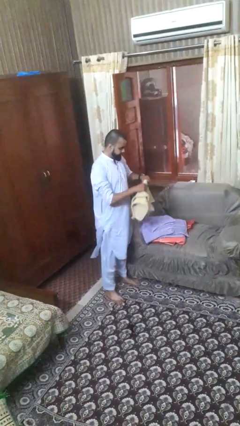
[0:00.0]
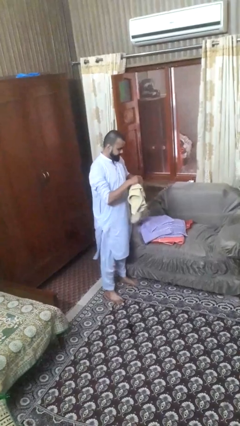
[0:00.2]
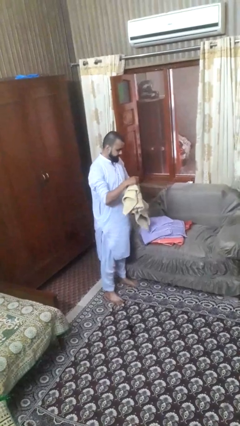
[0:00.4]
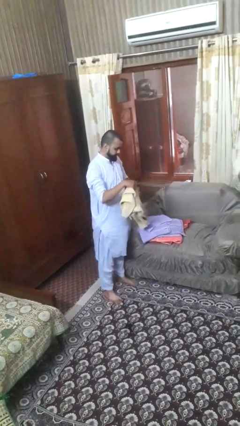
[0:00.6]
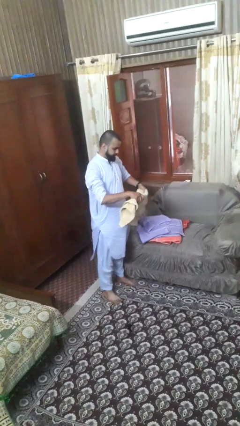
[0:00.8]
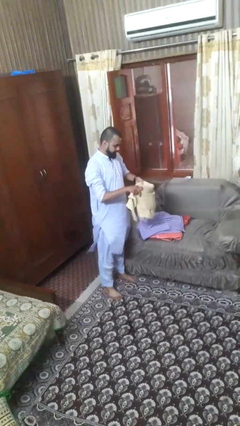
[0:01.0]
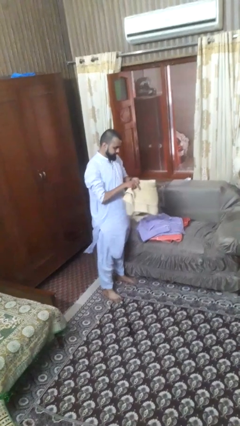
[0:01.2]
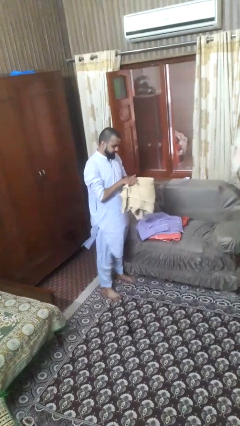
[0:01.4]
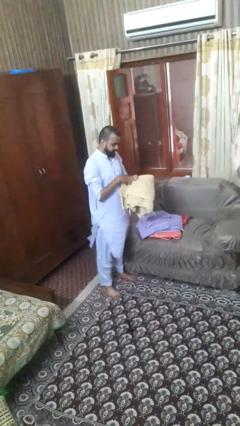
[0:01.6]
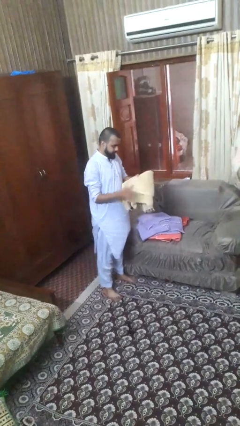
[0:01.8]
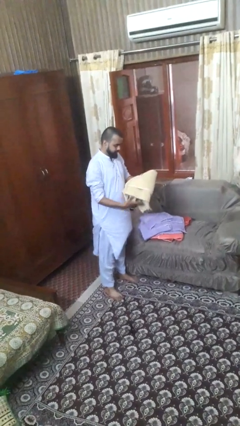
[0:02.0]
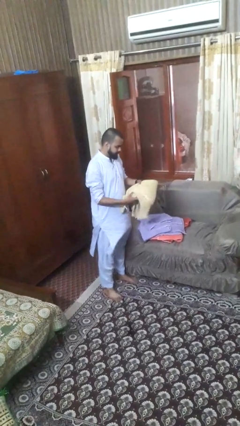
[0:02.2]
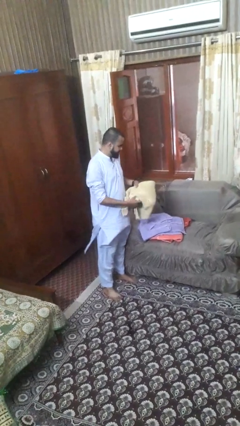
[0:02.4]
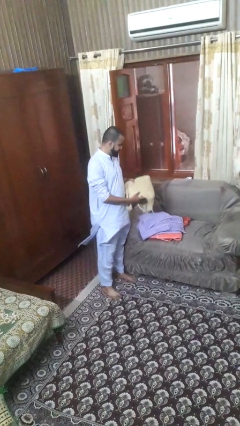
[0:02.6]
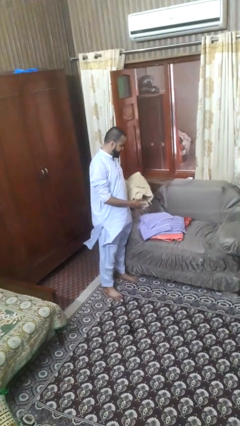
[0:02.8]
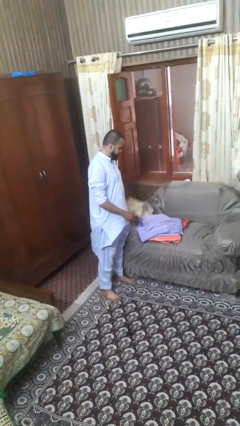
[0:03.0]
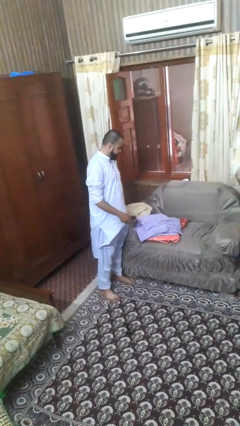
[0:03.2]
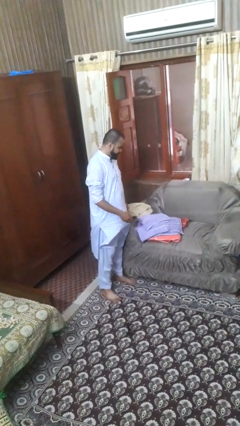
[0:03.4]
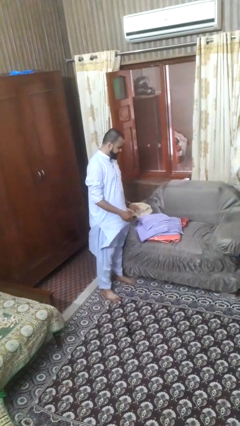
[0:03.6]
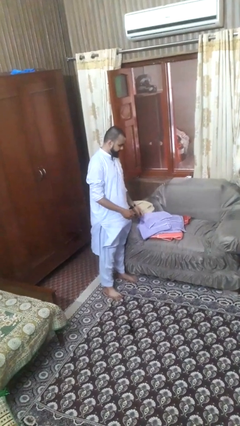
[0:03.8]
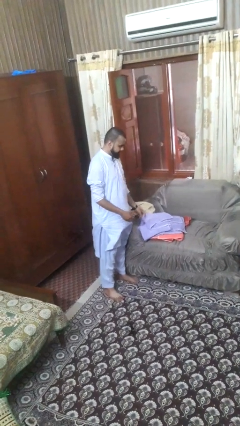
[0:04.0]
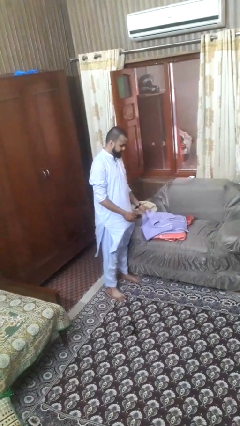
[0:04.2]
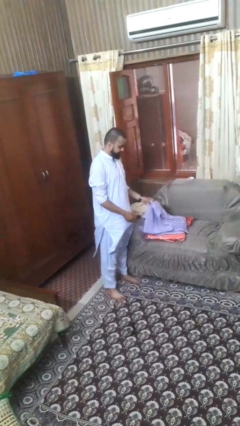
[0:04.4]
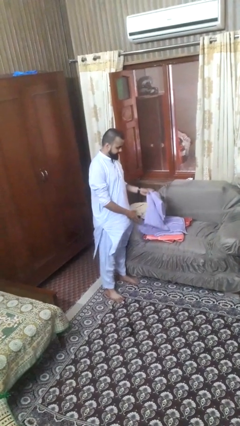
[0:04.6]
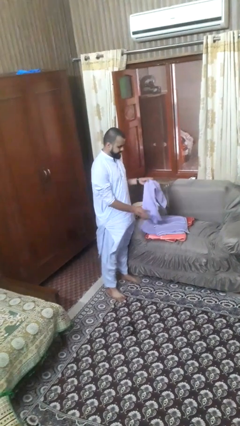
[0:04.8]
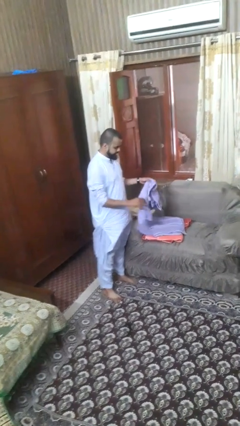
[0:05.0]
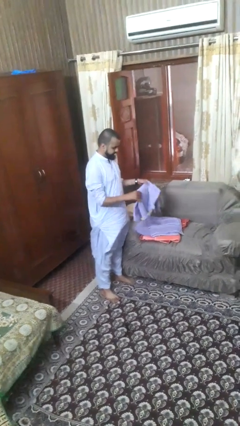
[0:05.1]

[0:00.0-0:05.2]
person folds towel

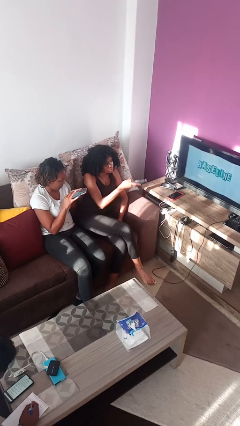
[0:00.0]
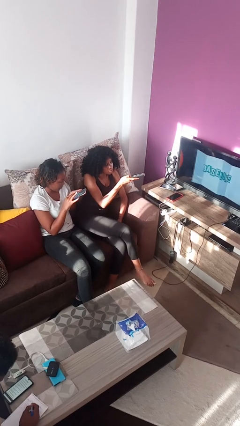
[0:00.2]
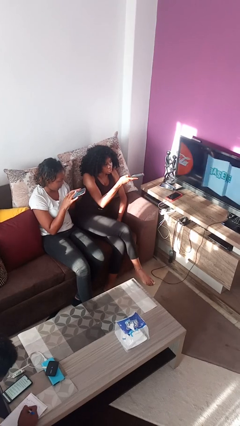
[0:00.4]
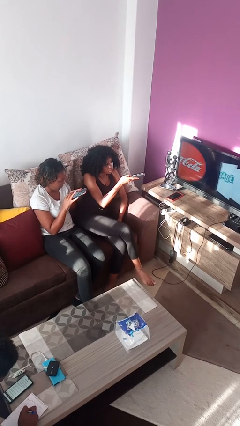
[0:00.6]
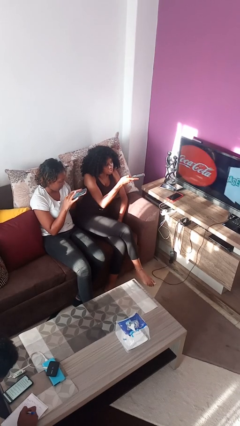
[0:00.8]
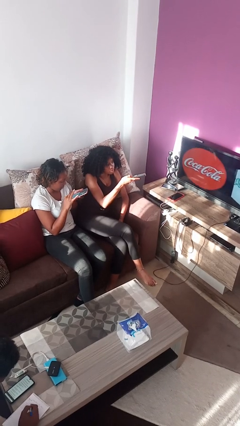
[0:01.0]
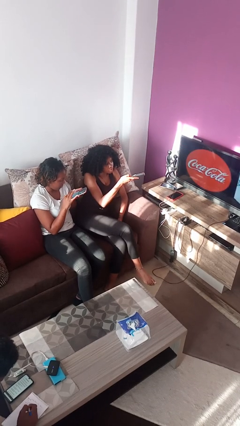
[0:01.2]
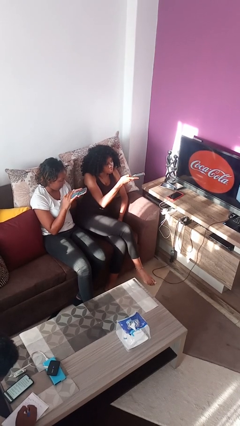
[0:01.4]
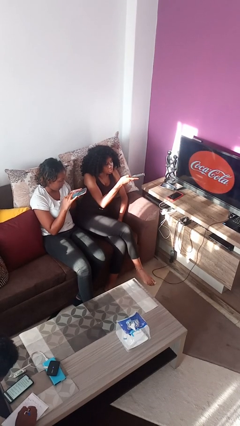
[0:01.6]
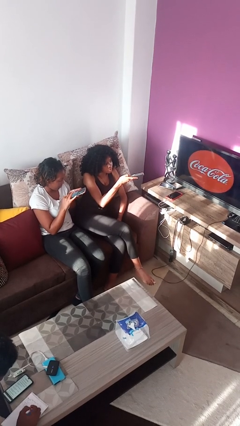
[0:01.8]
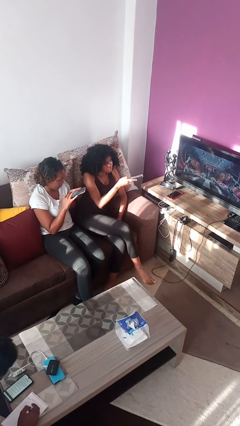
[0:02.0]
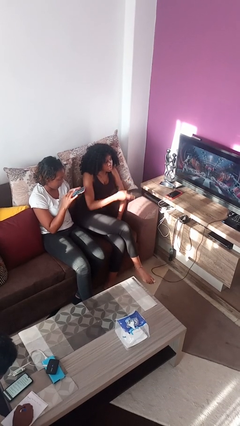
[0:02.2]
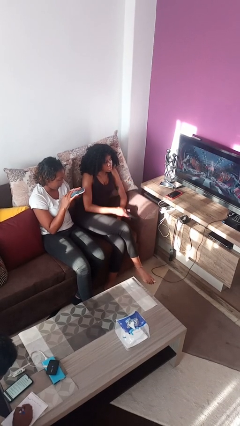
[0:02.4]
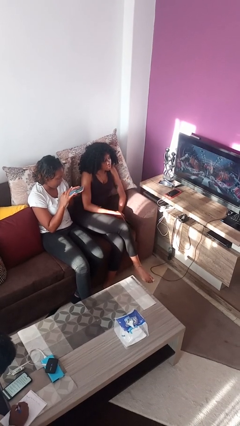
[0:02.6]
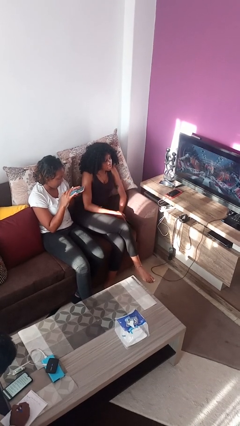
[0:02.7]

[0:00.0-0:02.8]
person uses television remote

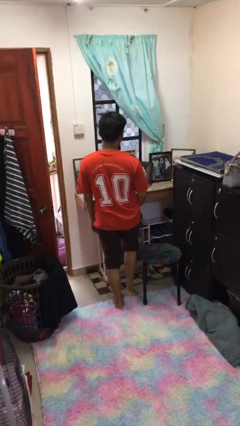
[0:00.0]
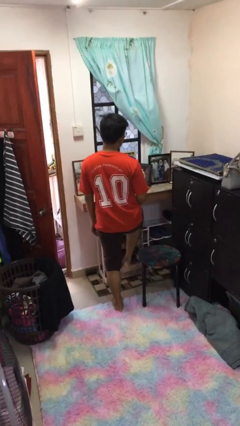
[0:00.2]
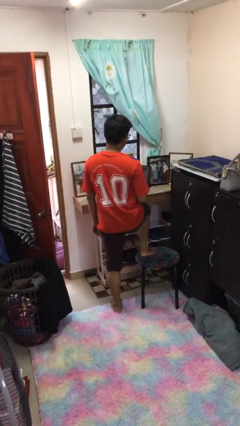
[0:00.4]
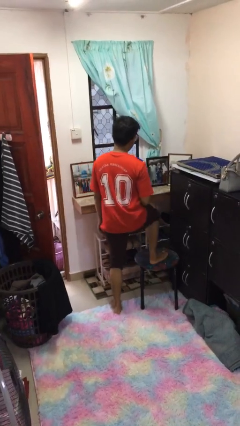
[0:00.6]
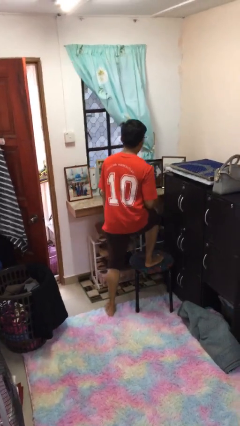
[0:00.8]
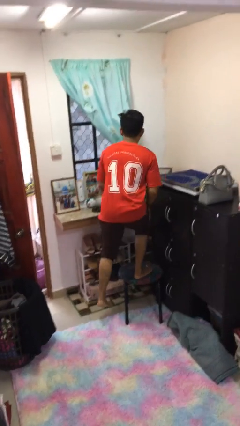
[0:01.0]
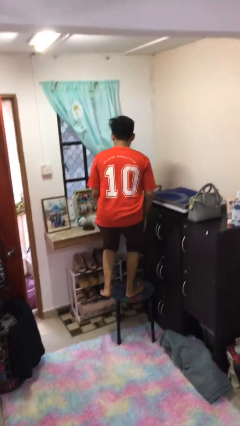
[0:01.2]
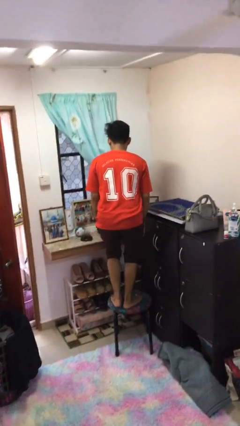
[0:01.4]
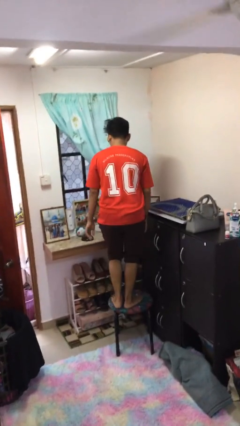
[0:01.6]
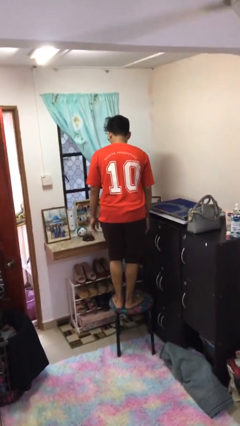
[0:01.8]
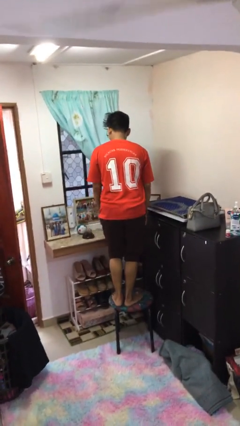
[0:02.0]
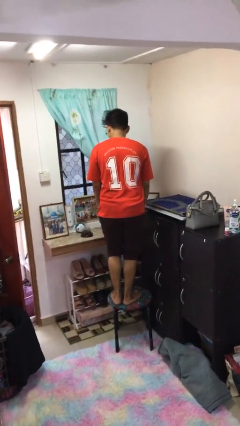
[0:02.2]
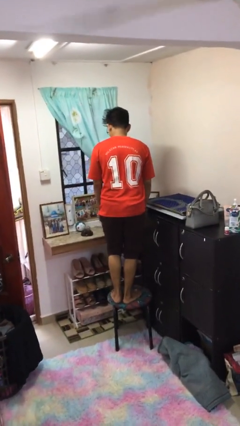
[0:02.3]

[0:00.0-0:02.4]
person climbs on chair

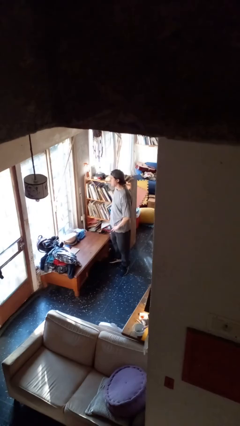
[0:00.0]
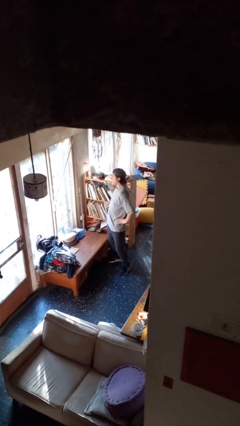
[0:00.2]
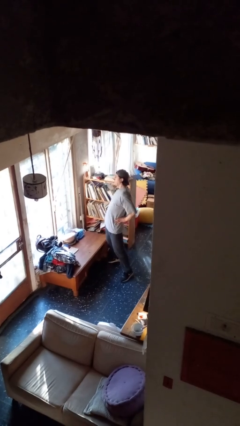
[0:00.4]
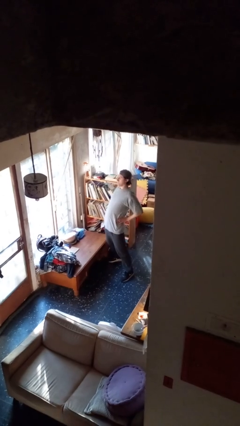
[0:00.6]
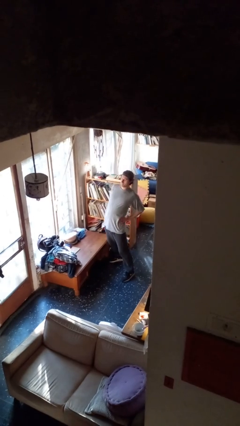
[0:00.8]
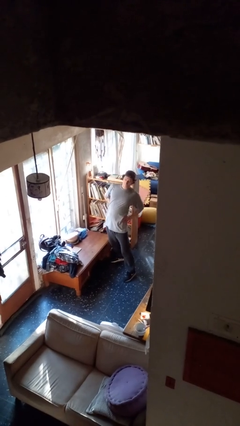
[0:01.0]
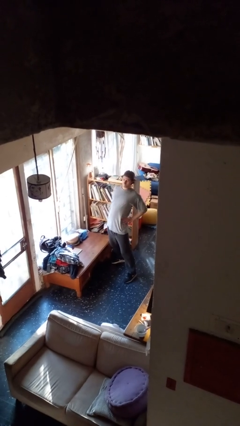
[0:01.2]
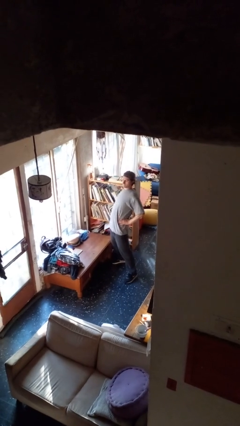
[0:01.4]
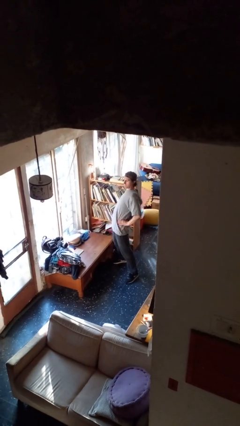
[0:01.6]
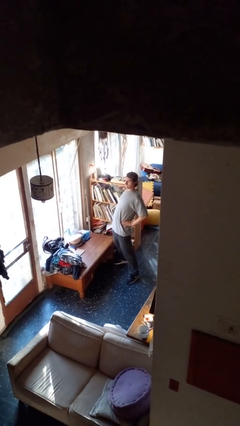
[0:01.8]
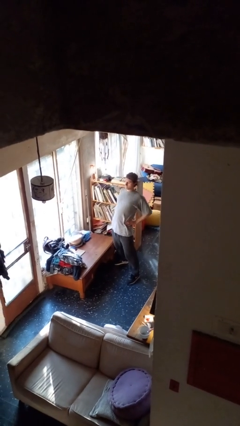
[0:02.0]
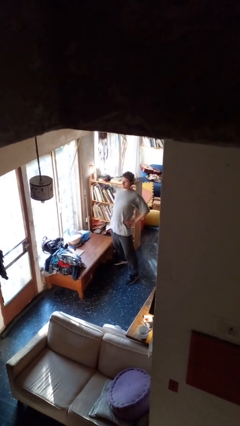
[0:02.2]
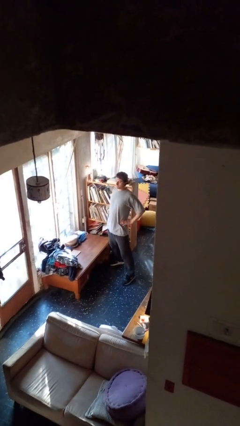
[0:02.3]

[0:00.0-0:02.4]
person stretches back

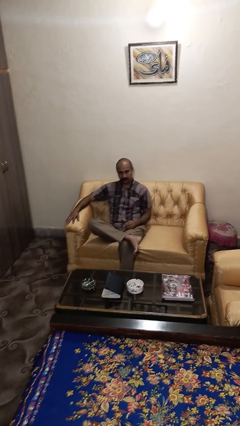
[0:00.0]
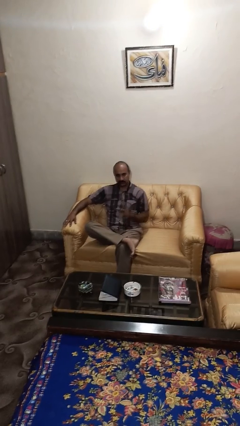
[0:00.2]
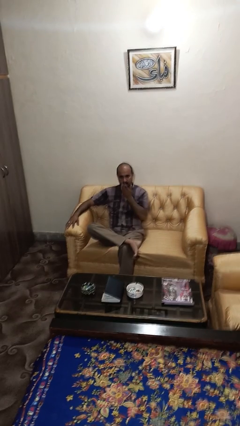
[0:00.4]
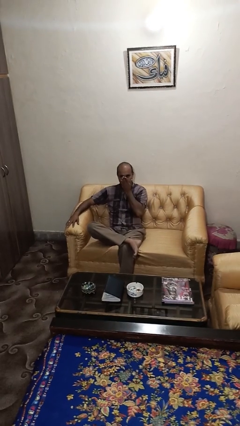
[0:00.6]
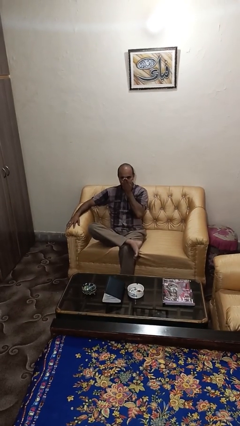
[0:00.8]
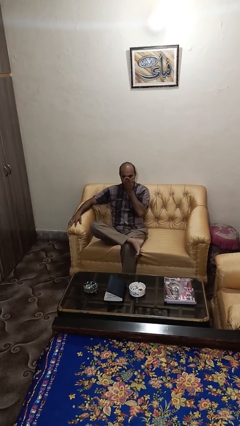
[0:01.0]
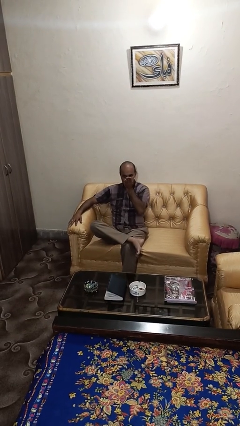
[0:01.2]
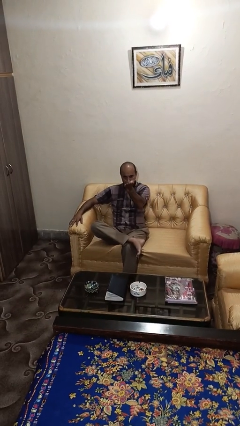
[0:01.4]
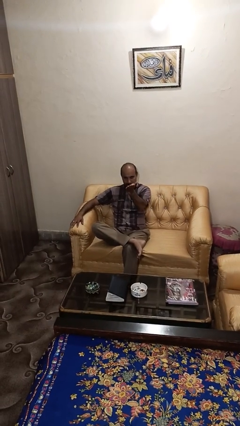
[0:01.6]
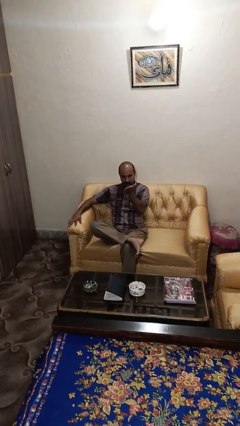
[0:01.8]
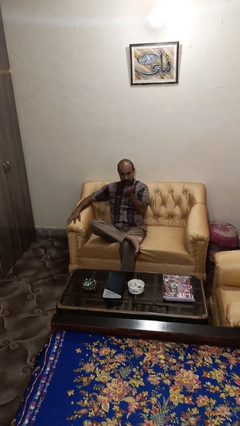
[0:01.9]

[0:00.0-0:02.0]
person gestures blow kiss

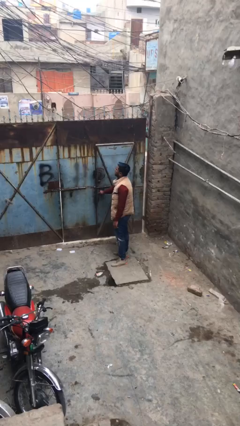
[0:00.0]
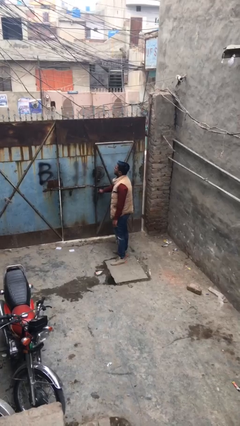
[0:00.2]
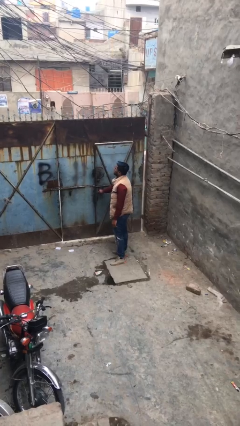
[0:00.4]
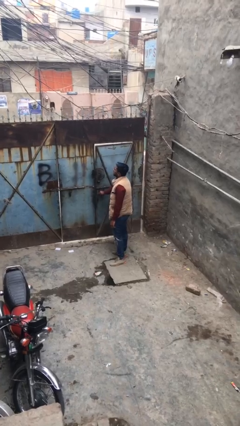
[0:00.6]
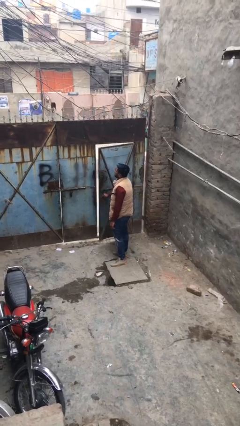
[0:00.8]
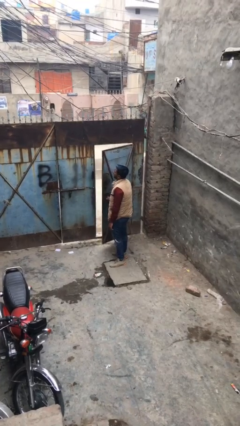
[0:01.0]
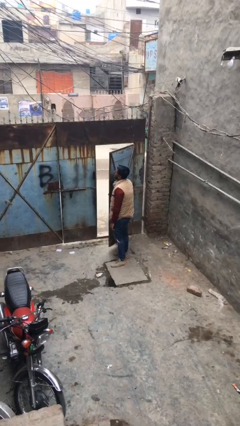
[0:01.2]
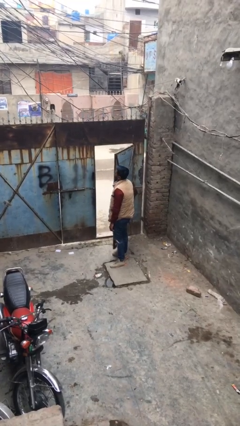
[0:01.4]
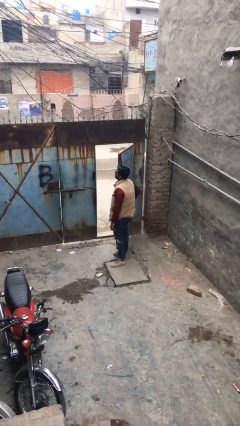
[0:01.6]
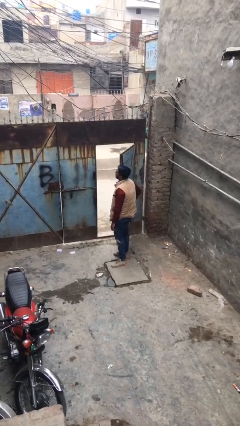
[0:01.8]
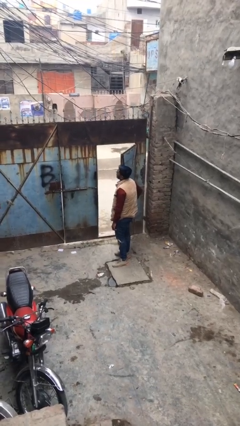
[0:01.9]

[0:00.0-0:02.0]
person opens facility door

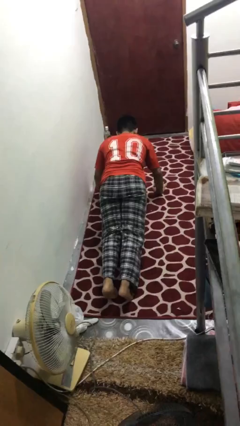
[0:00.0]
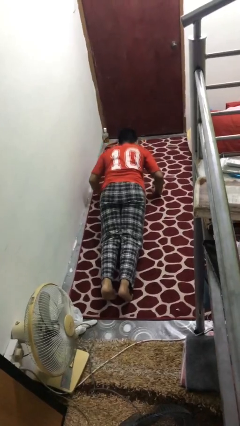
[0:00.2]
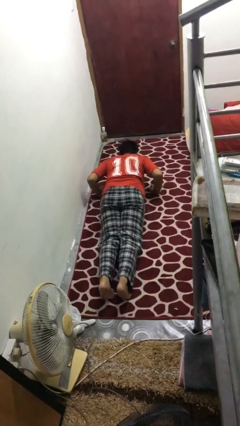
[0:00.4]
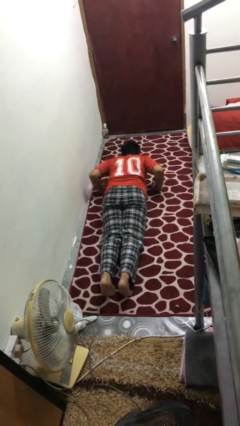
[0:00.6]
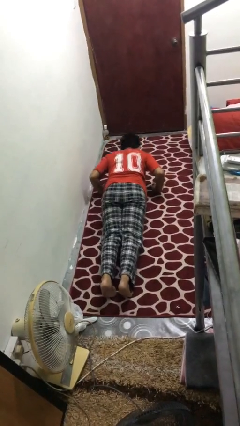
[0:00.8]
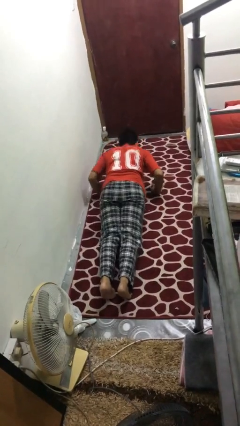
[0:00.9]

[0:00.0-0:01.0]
person exercises with pushup
